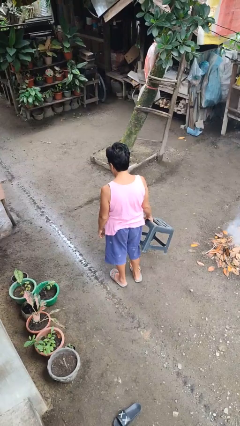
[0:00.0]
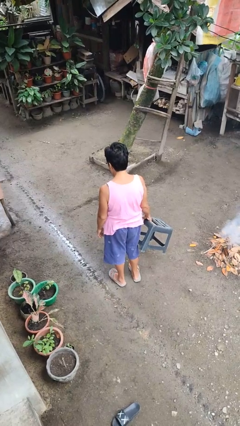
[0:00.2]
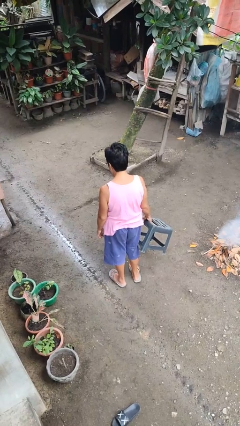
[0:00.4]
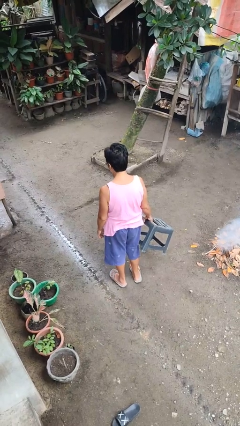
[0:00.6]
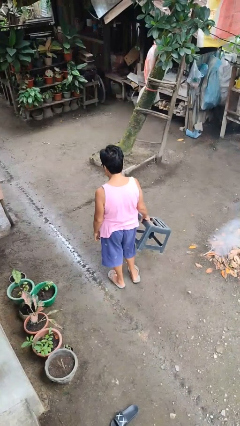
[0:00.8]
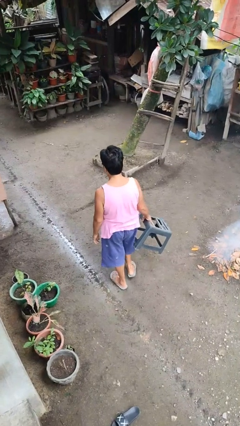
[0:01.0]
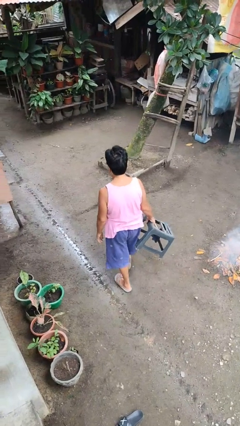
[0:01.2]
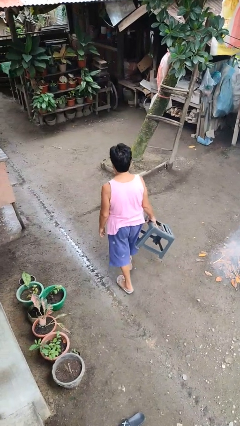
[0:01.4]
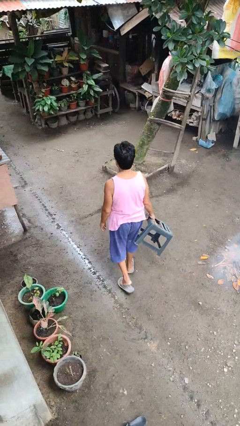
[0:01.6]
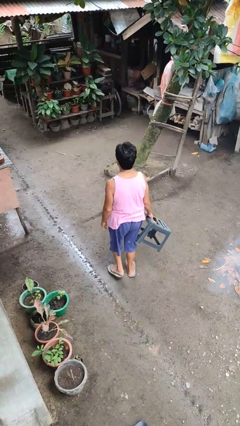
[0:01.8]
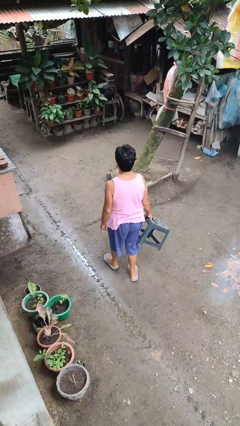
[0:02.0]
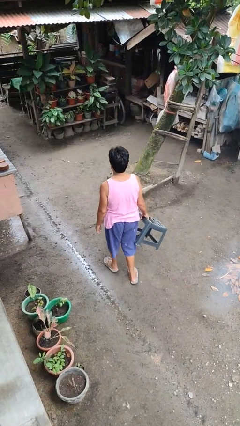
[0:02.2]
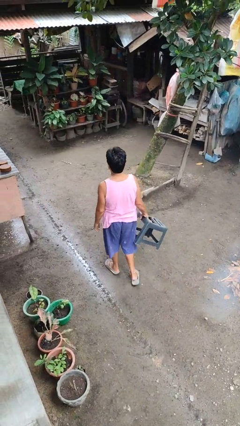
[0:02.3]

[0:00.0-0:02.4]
person carries furniture

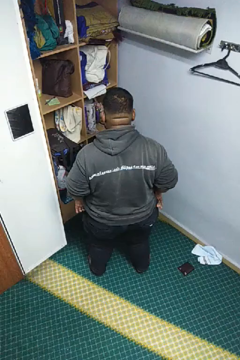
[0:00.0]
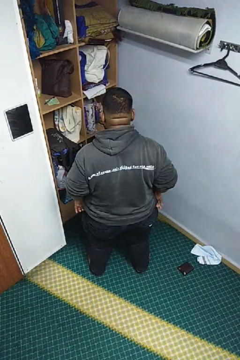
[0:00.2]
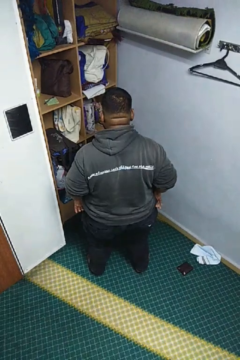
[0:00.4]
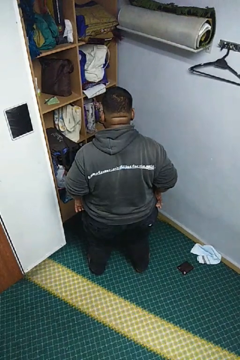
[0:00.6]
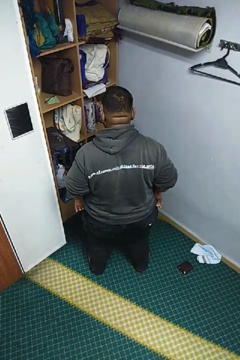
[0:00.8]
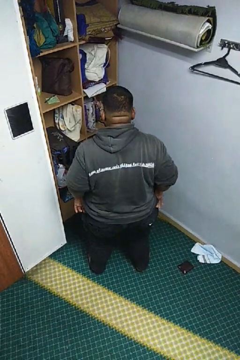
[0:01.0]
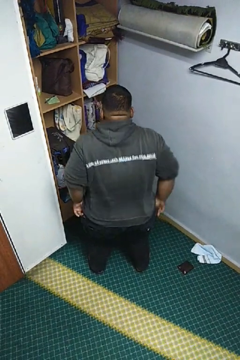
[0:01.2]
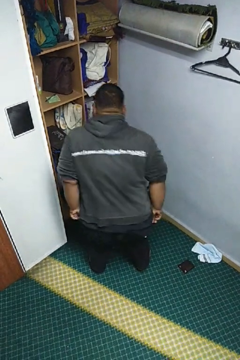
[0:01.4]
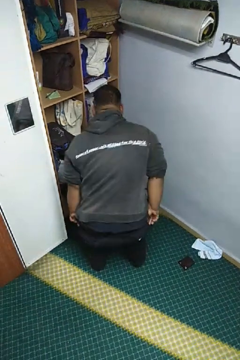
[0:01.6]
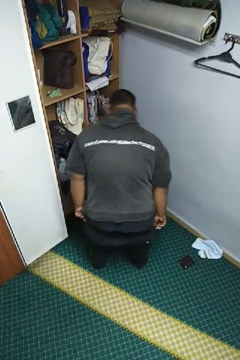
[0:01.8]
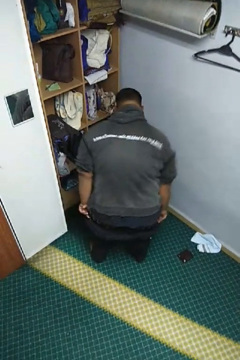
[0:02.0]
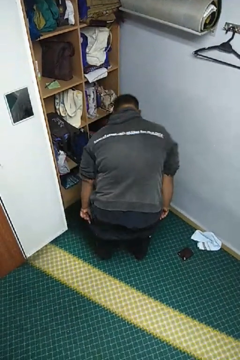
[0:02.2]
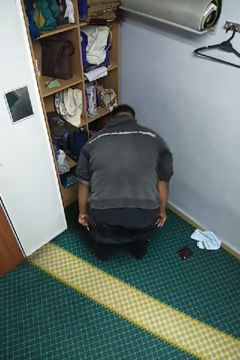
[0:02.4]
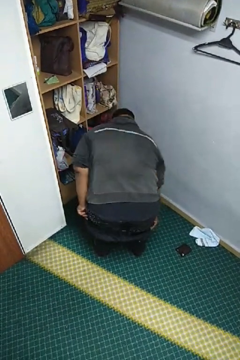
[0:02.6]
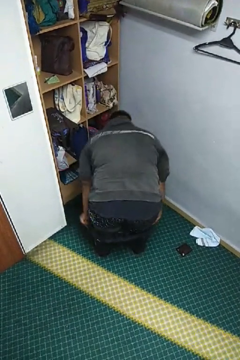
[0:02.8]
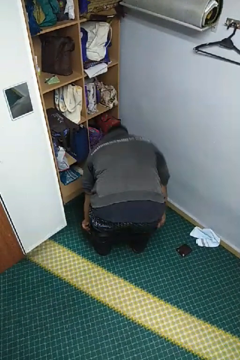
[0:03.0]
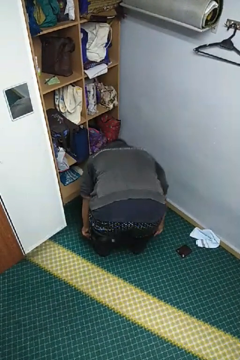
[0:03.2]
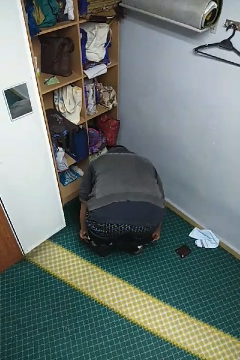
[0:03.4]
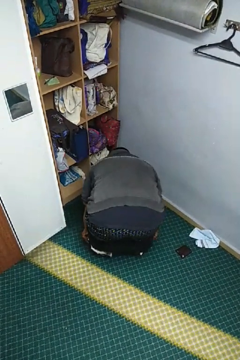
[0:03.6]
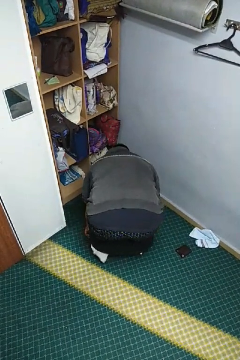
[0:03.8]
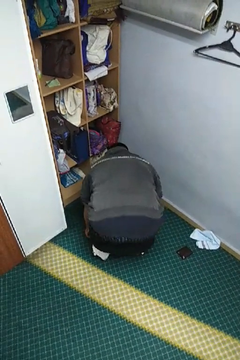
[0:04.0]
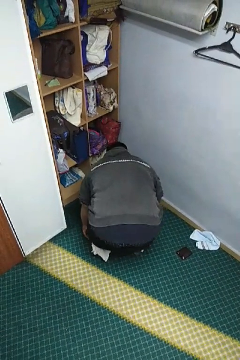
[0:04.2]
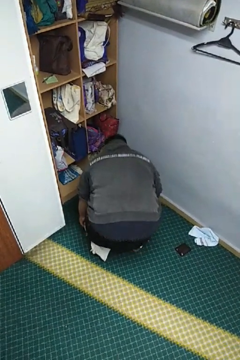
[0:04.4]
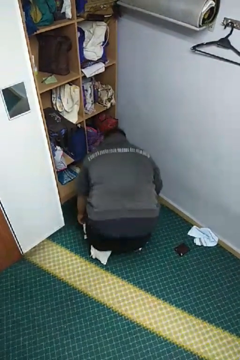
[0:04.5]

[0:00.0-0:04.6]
person takes off pants

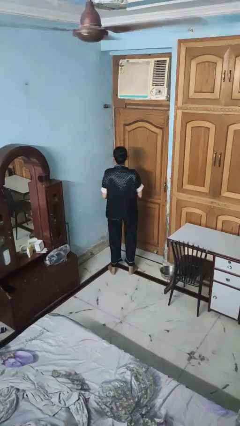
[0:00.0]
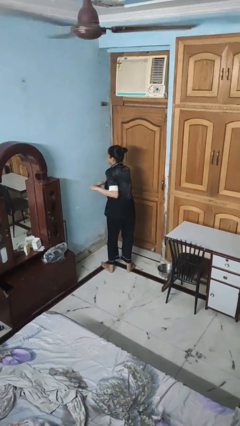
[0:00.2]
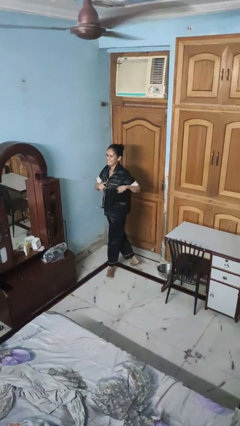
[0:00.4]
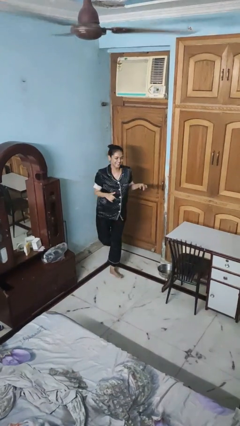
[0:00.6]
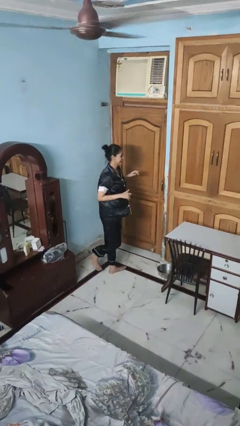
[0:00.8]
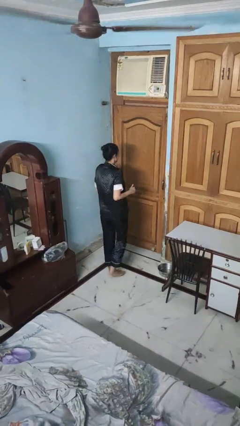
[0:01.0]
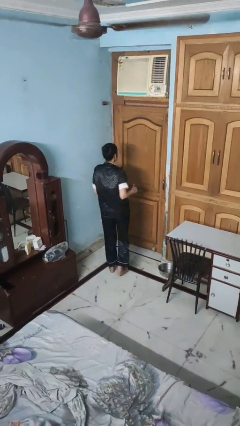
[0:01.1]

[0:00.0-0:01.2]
person twirls

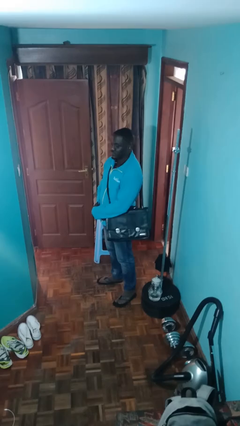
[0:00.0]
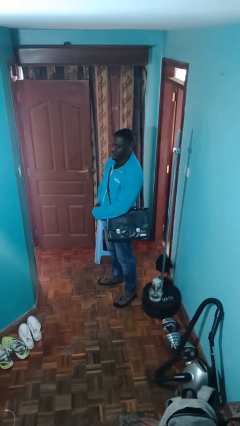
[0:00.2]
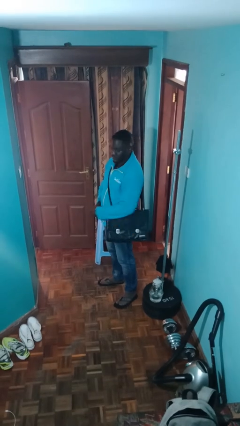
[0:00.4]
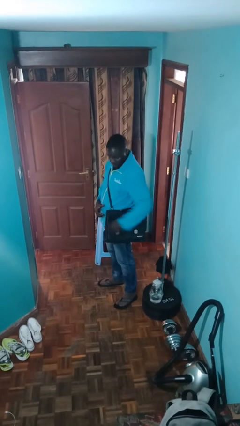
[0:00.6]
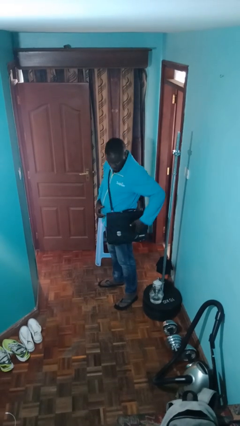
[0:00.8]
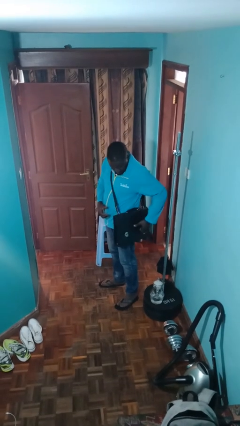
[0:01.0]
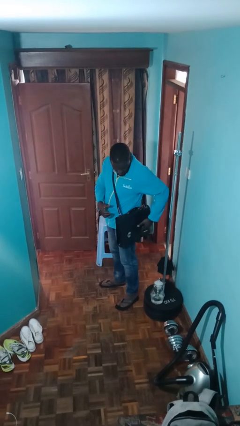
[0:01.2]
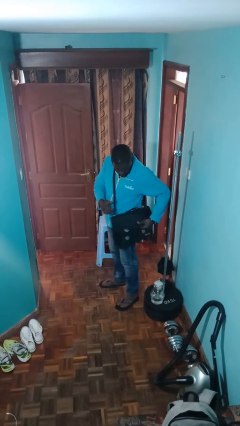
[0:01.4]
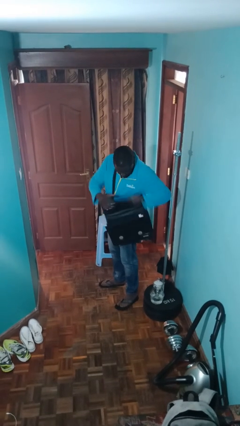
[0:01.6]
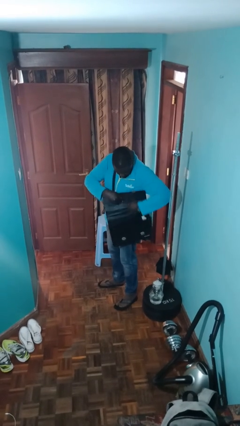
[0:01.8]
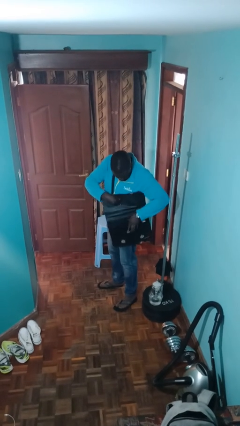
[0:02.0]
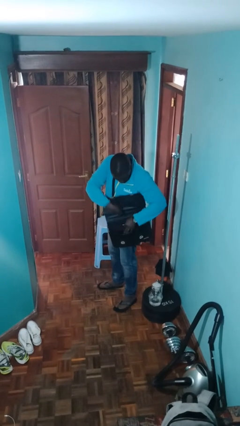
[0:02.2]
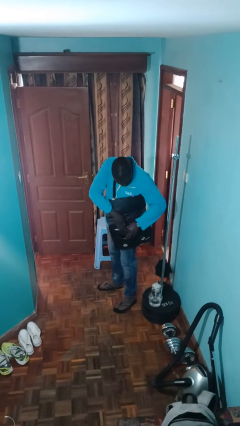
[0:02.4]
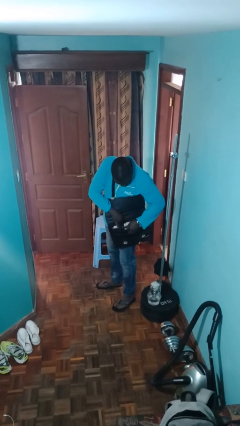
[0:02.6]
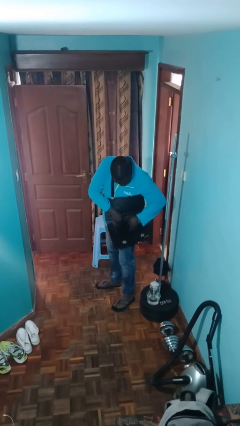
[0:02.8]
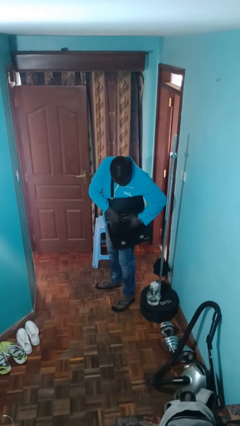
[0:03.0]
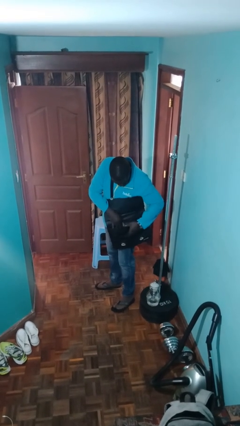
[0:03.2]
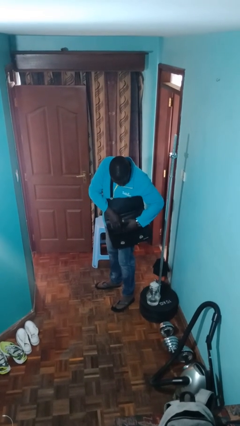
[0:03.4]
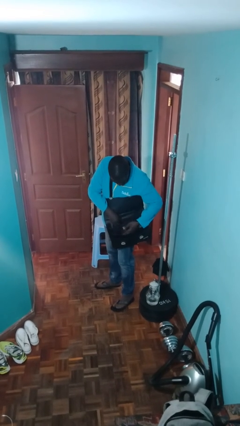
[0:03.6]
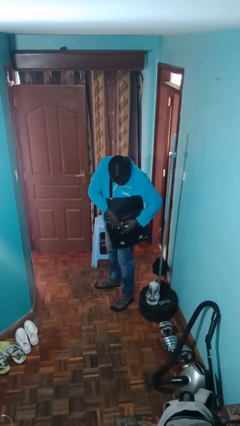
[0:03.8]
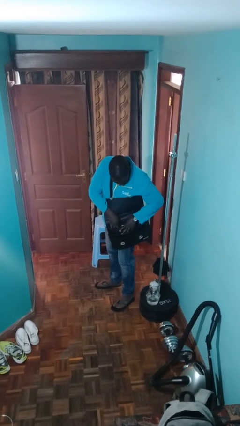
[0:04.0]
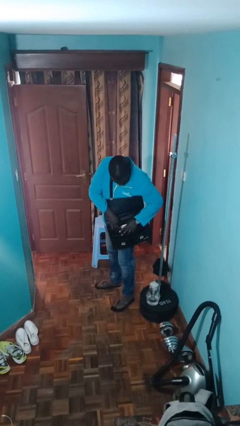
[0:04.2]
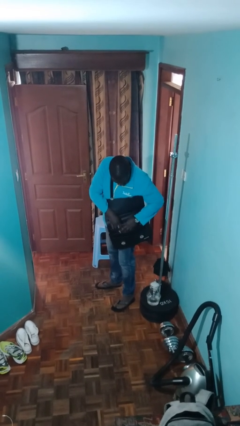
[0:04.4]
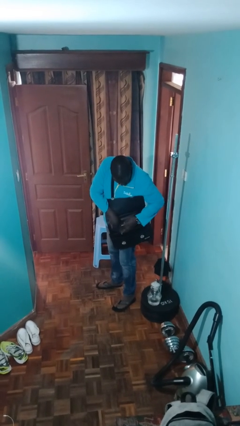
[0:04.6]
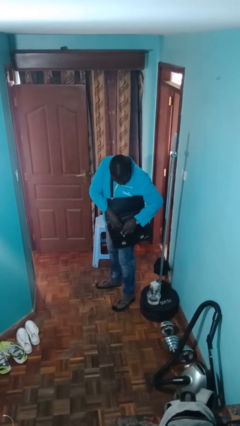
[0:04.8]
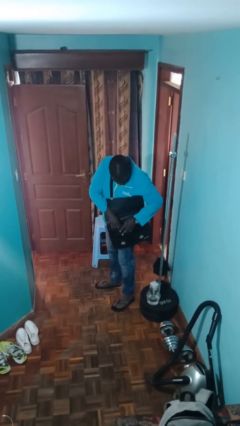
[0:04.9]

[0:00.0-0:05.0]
person searches in purse

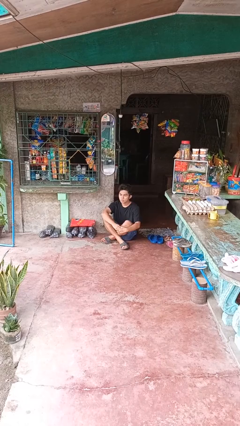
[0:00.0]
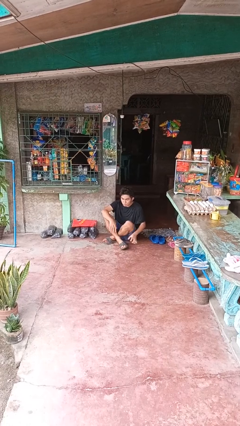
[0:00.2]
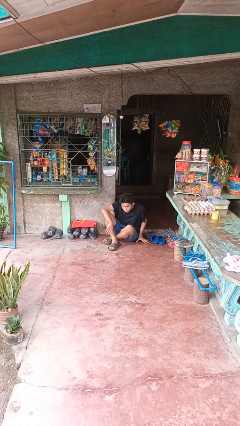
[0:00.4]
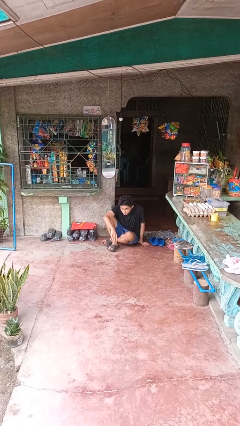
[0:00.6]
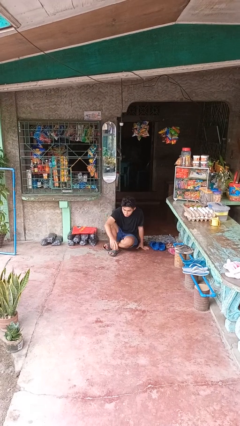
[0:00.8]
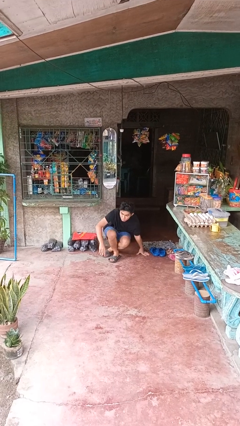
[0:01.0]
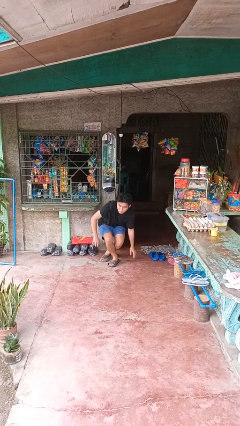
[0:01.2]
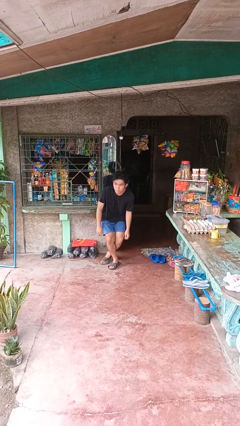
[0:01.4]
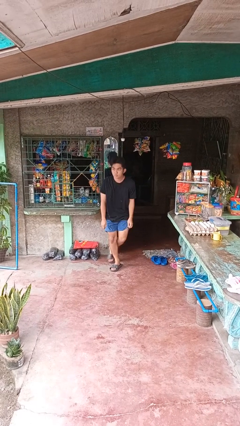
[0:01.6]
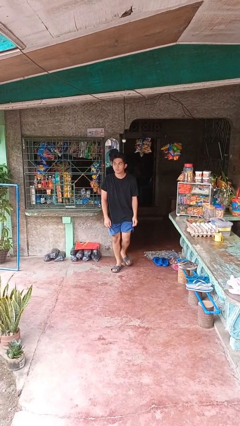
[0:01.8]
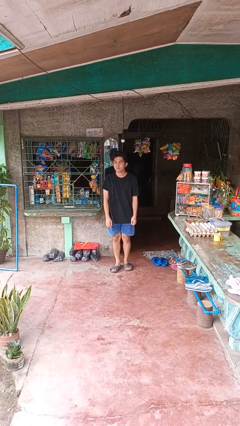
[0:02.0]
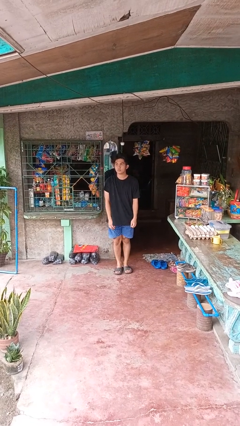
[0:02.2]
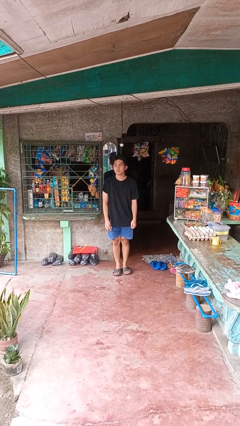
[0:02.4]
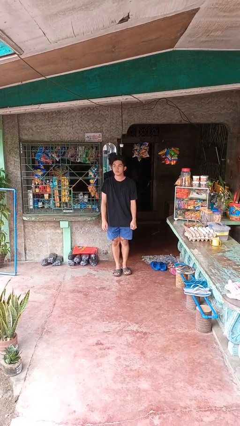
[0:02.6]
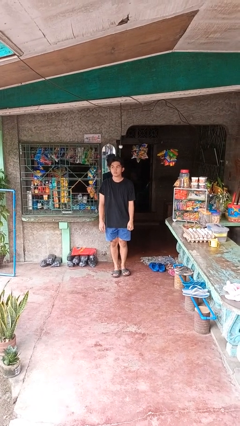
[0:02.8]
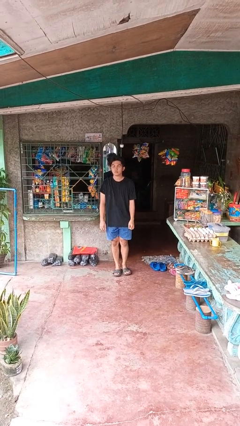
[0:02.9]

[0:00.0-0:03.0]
person stands up from floor

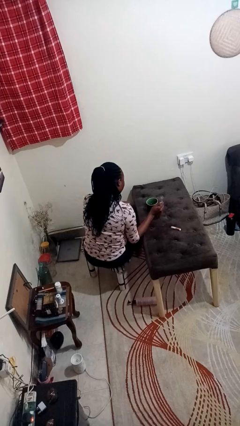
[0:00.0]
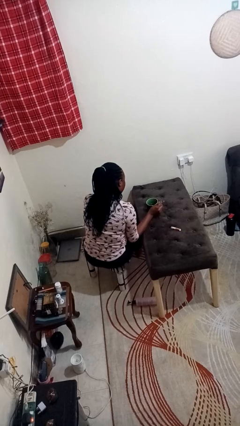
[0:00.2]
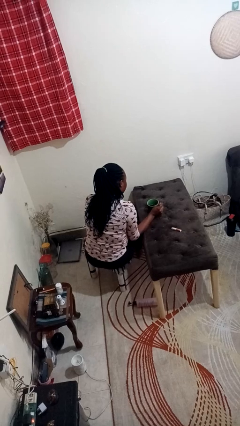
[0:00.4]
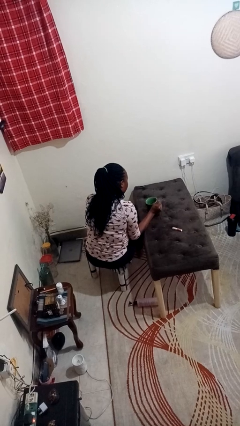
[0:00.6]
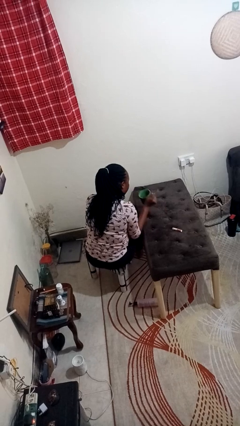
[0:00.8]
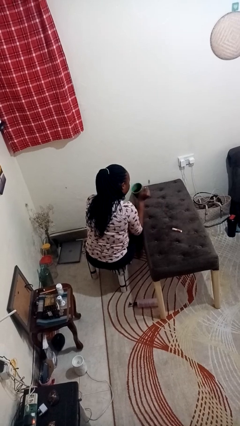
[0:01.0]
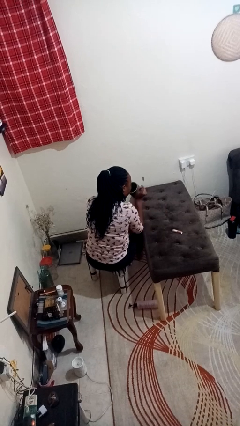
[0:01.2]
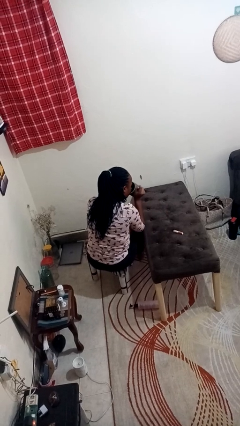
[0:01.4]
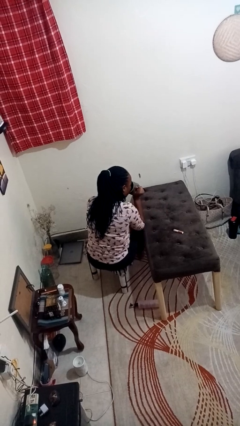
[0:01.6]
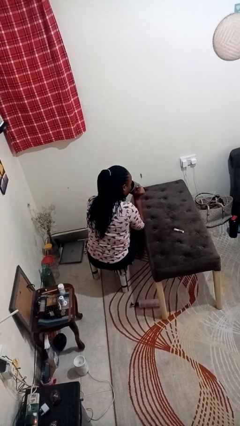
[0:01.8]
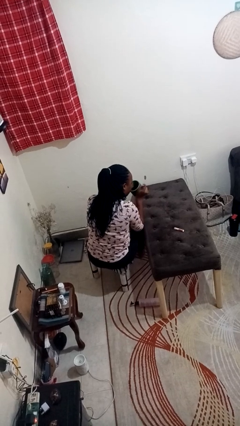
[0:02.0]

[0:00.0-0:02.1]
person drinks from mug
